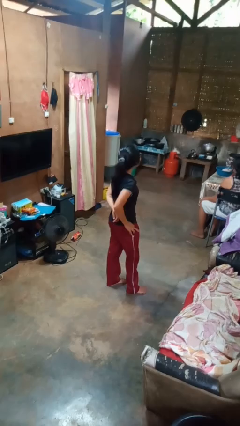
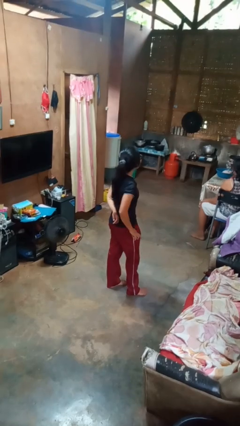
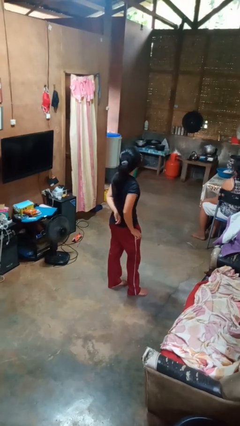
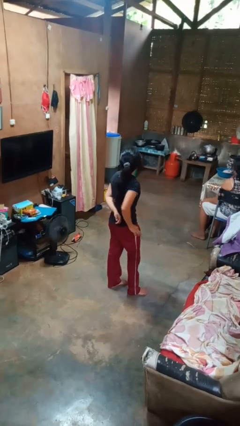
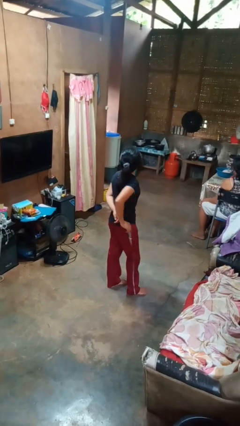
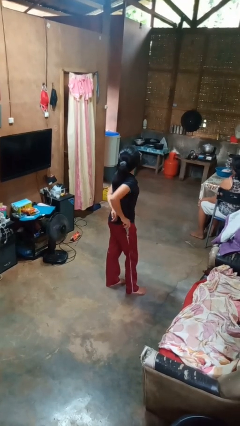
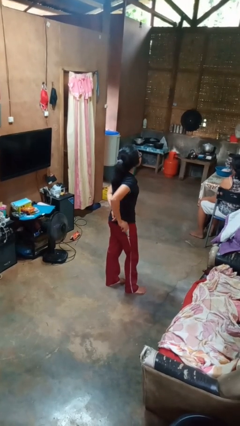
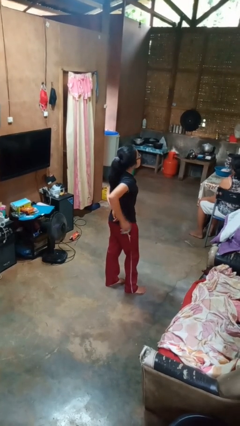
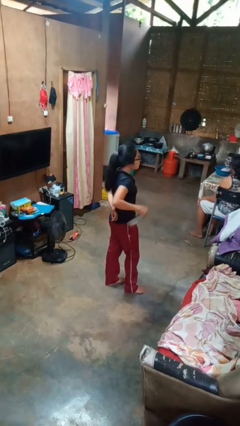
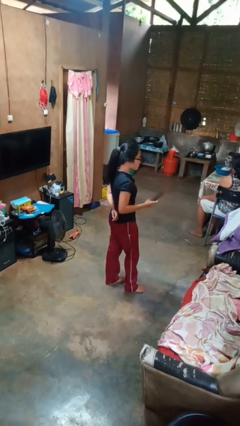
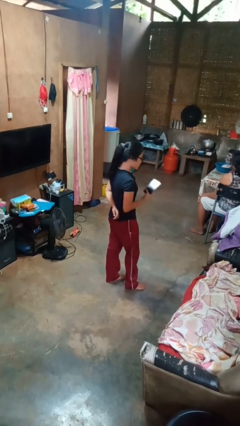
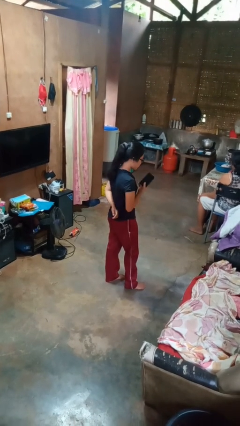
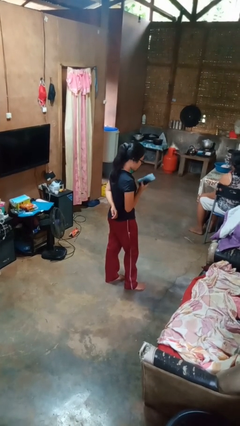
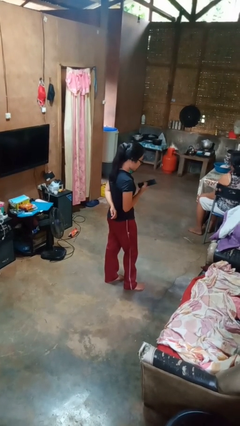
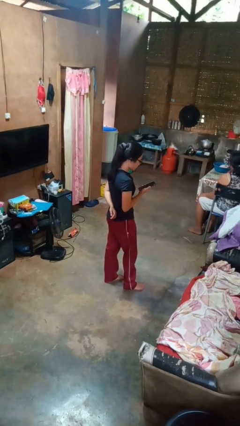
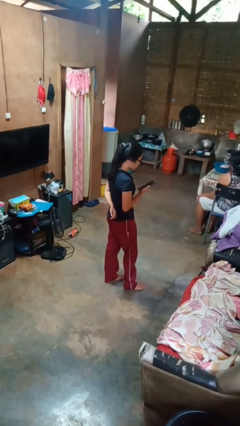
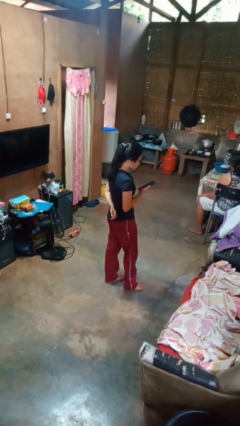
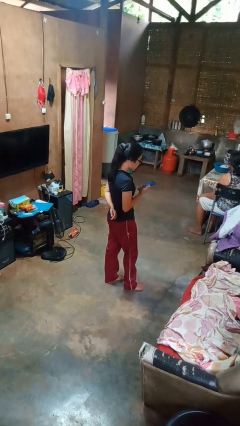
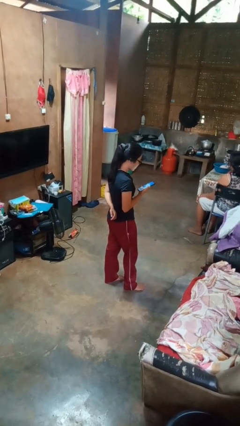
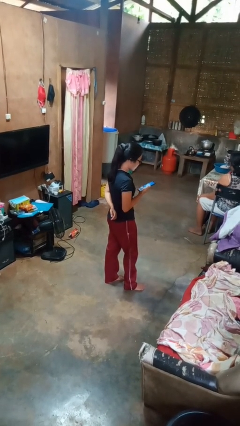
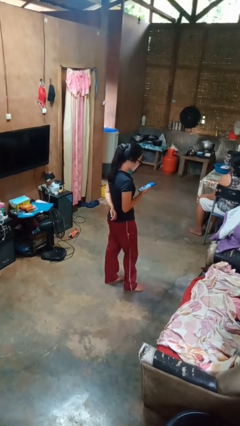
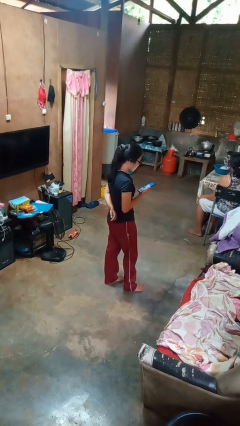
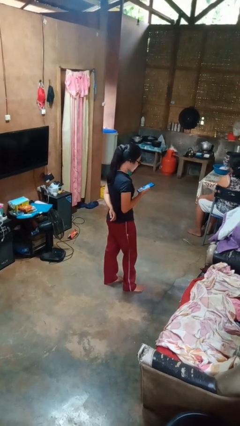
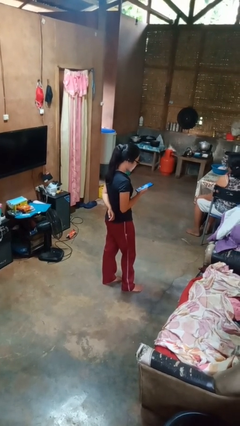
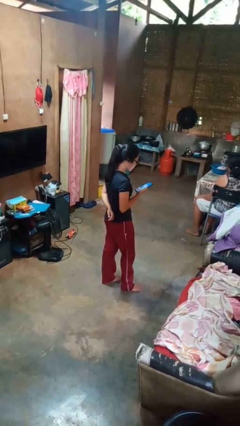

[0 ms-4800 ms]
person takes phone from pocket

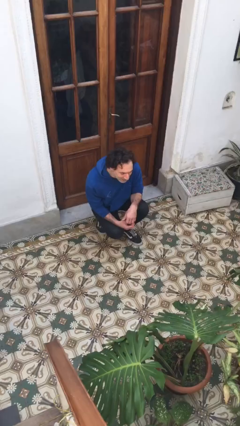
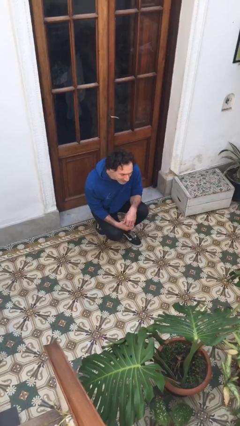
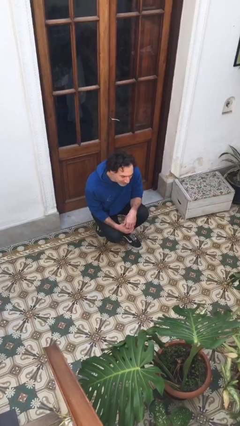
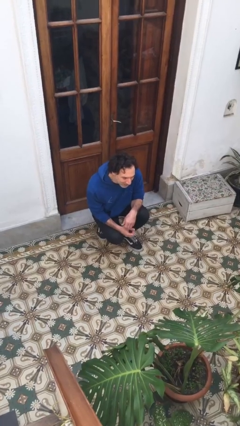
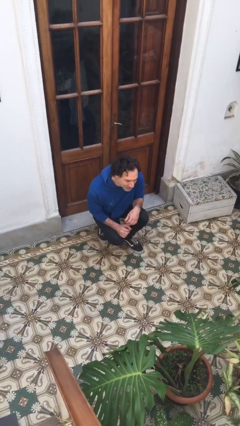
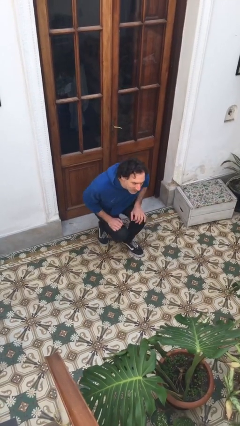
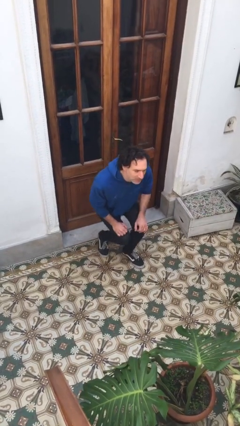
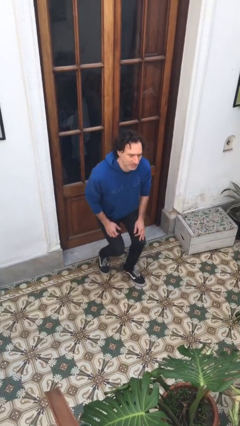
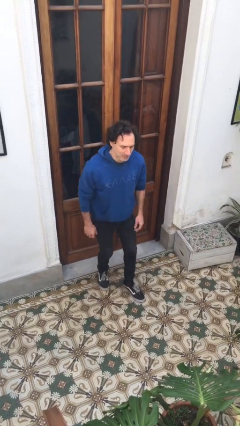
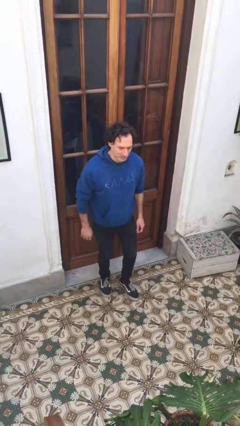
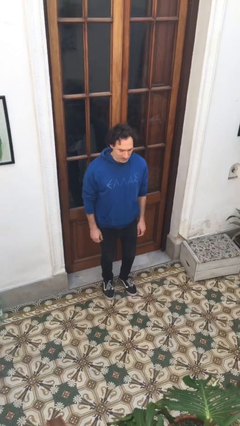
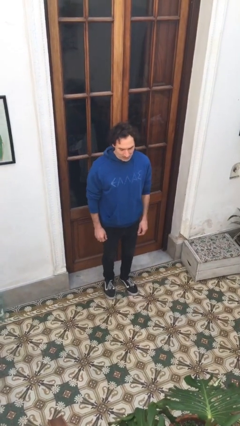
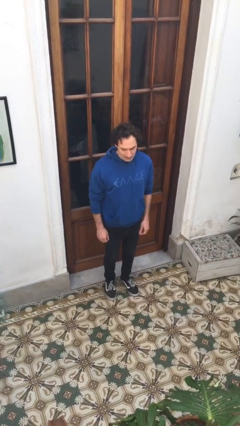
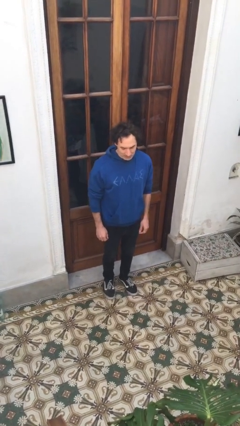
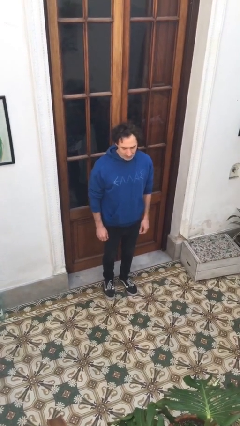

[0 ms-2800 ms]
person stands up

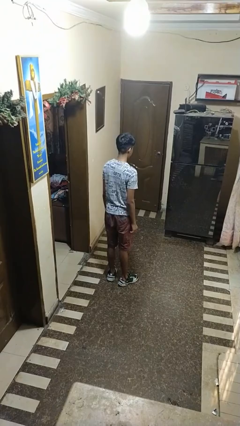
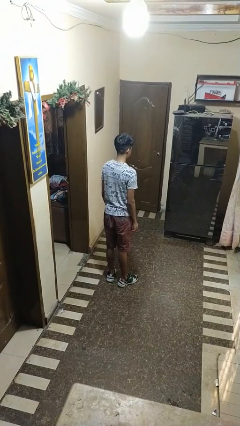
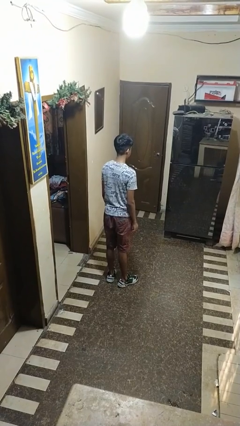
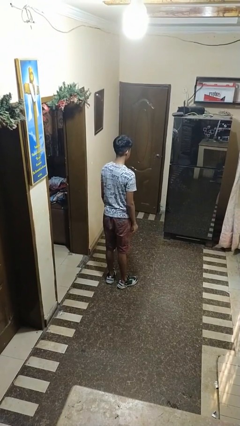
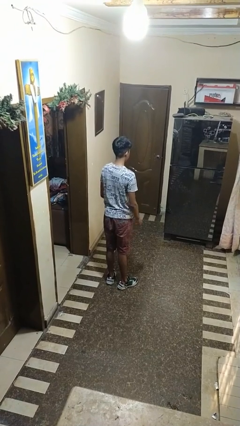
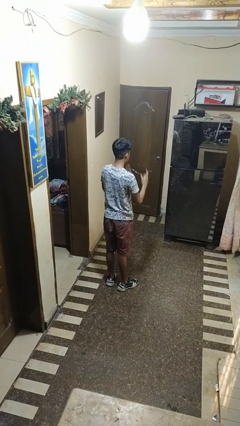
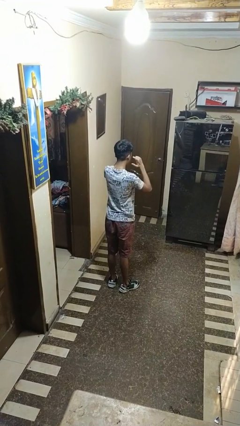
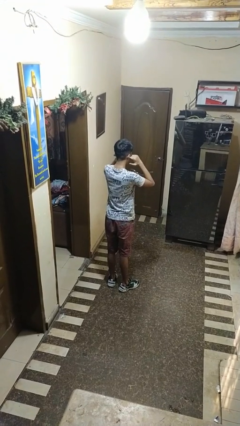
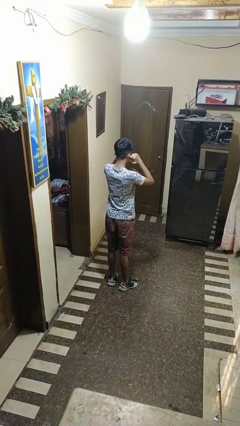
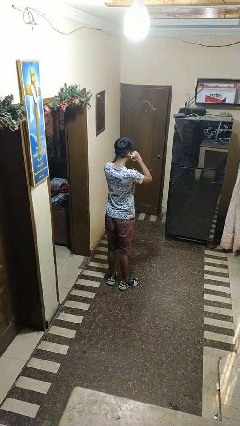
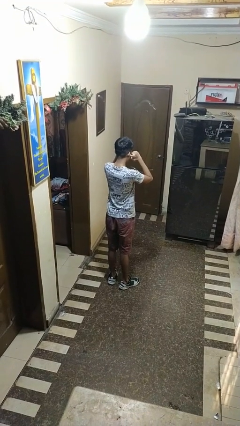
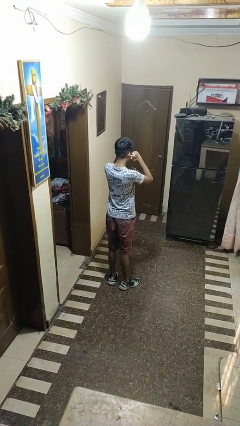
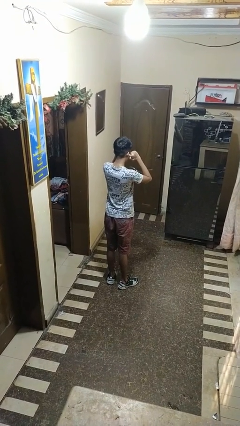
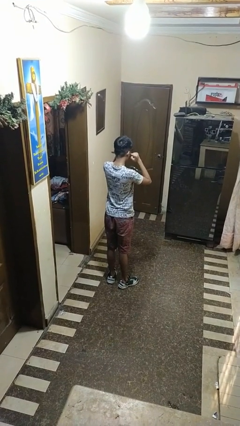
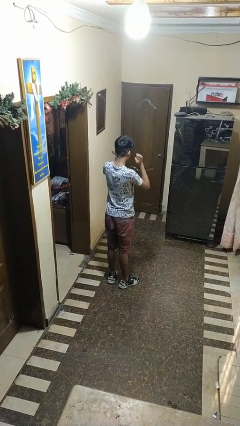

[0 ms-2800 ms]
person puts fingers in ear

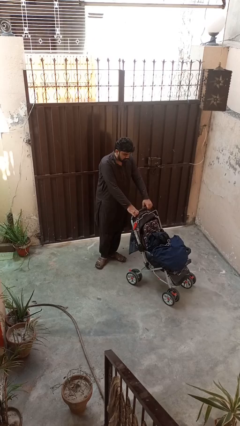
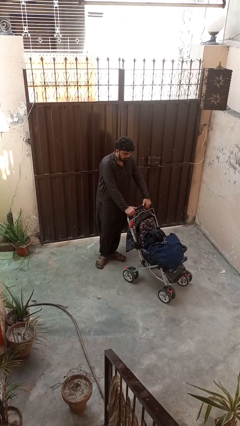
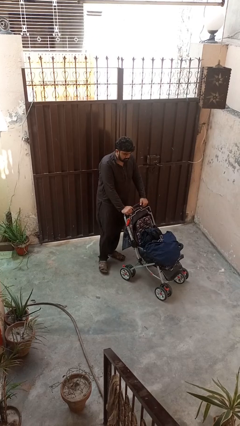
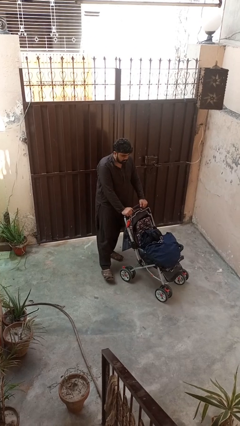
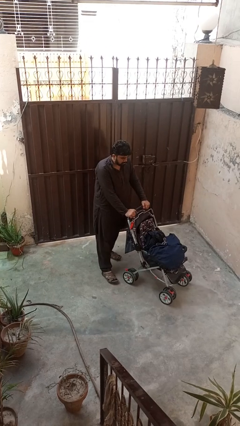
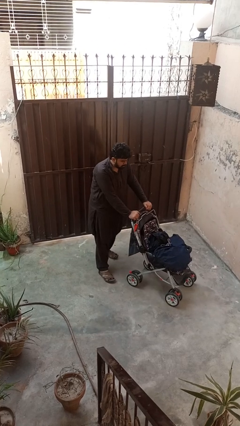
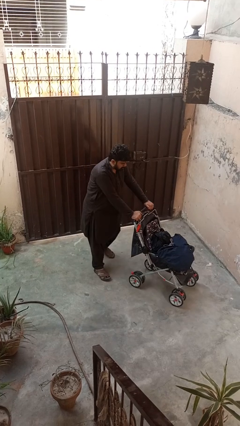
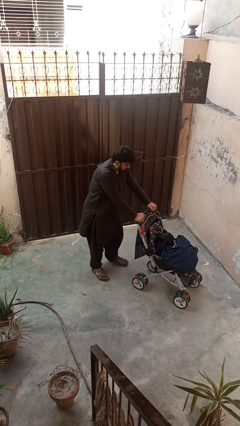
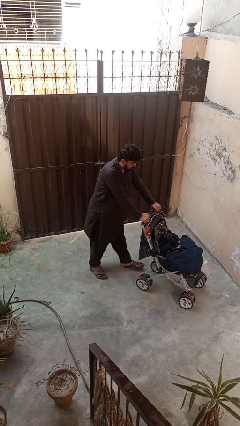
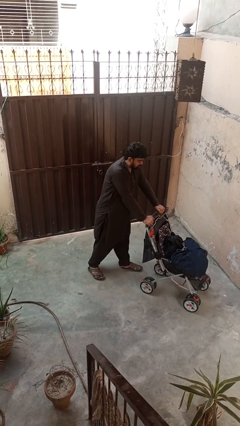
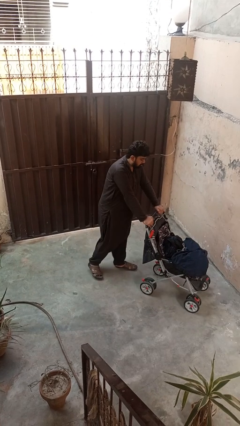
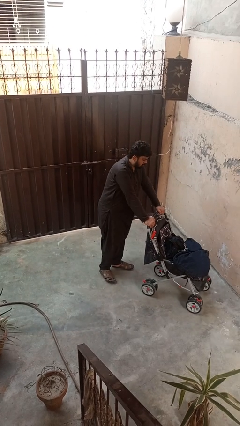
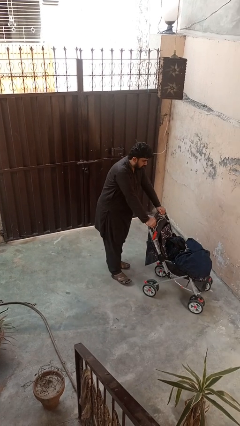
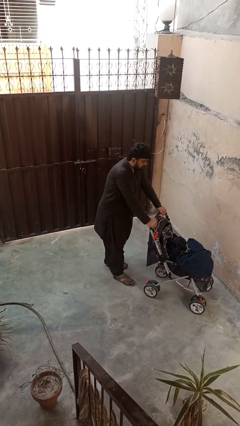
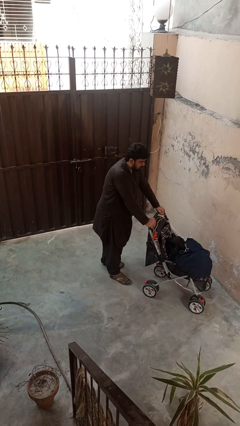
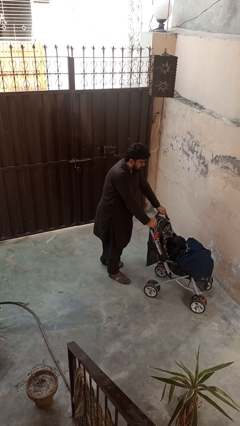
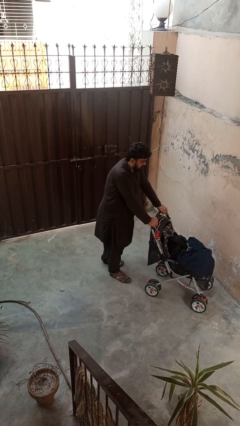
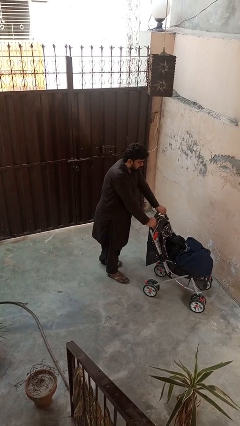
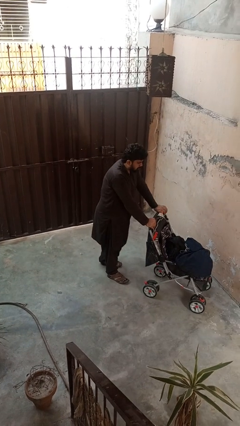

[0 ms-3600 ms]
person pushes wheeled cart

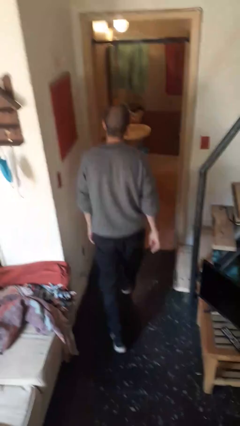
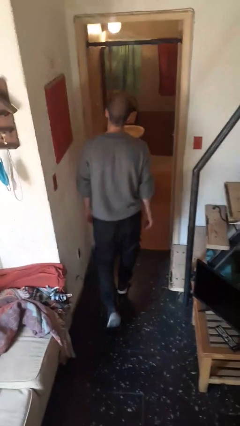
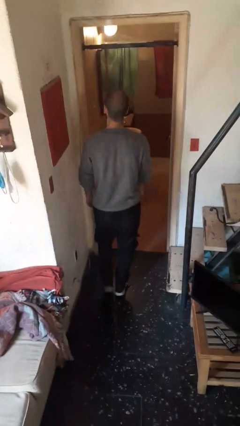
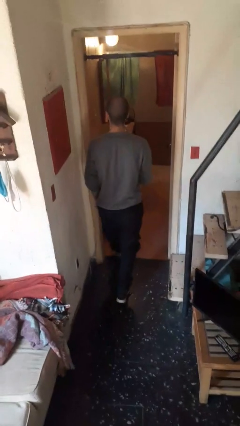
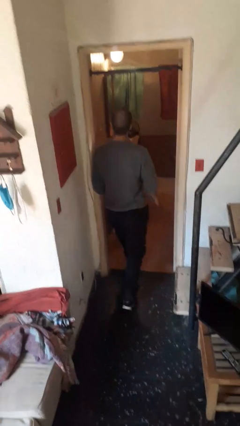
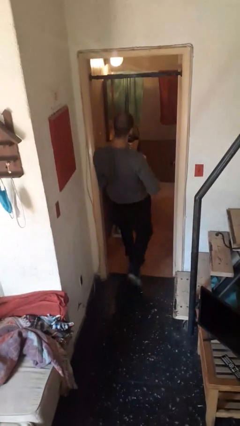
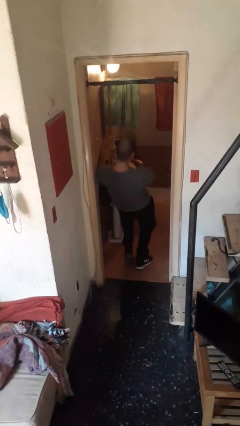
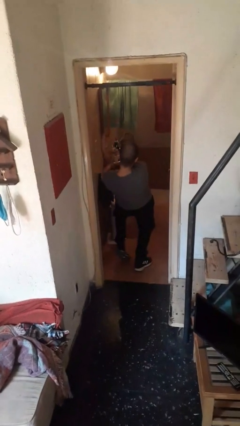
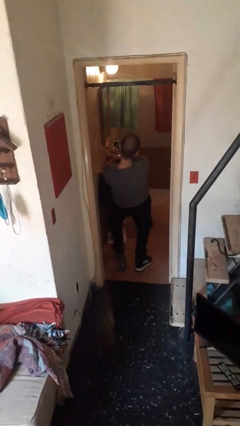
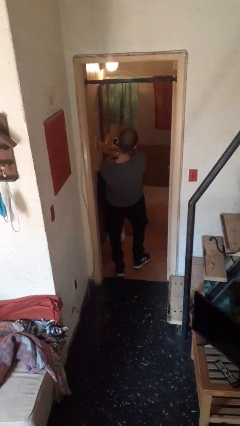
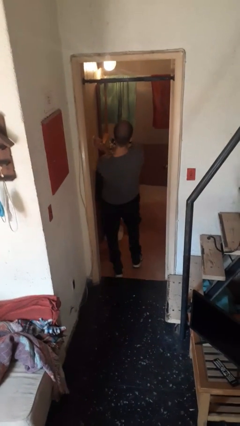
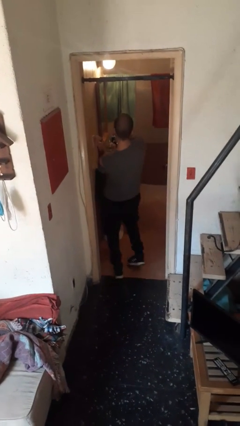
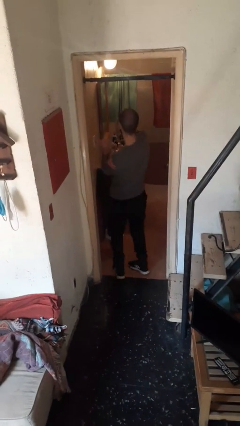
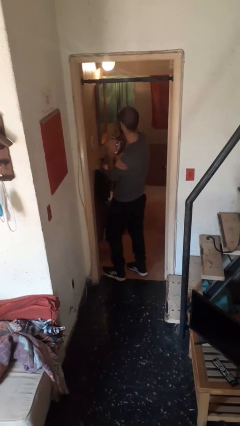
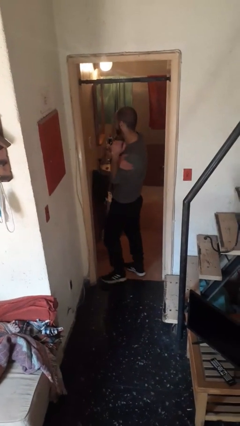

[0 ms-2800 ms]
person bumps into wall

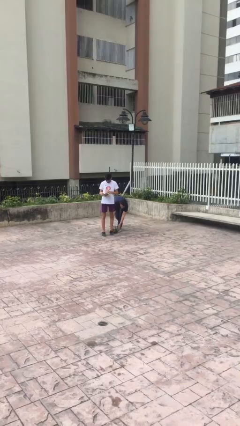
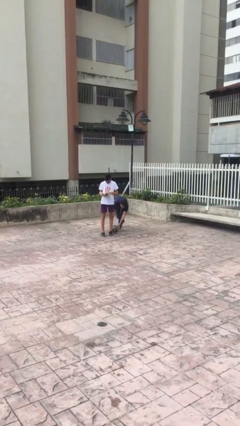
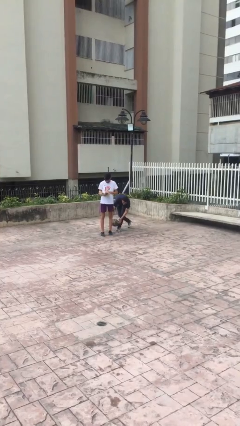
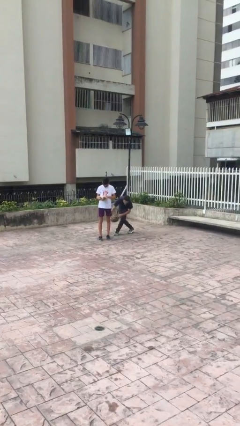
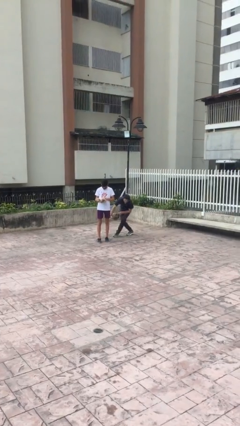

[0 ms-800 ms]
person steals object from person
